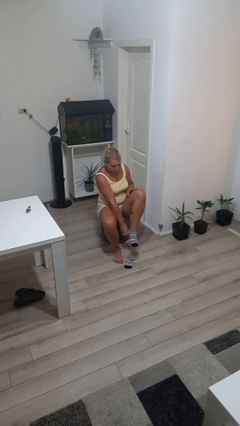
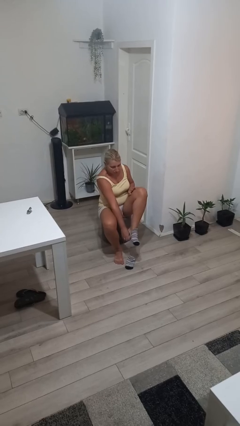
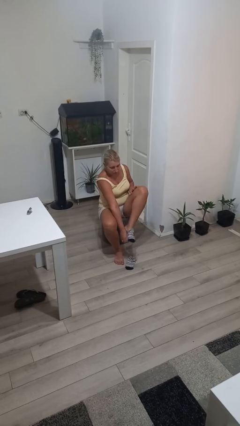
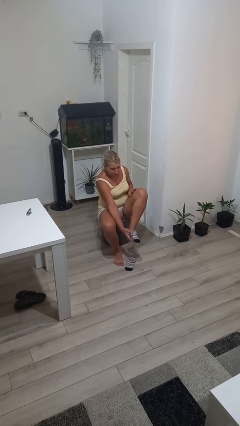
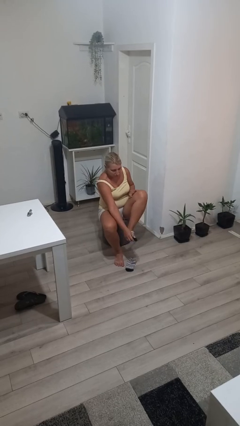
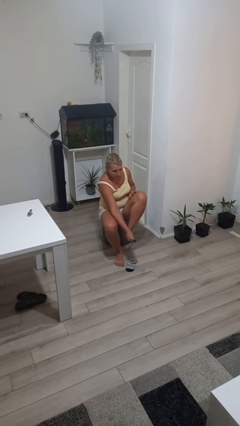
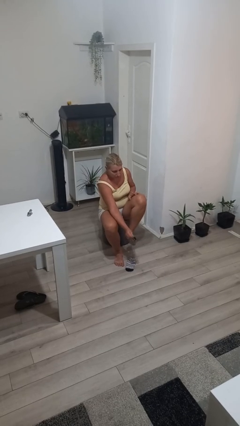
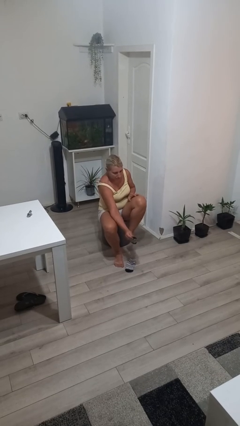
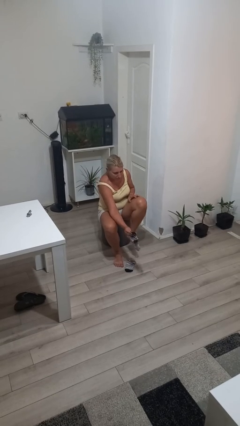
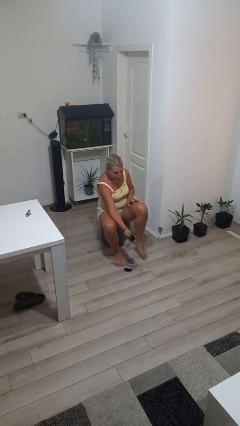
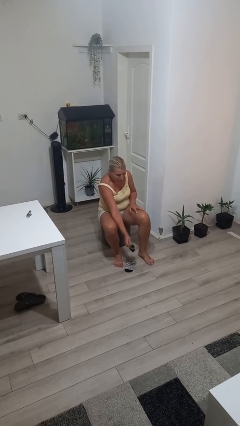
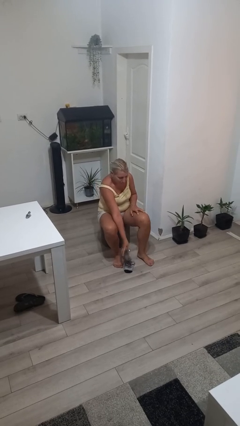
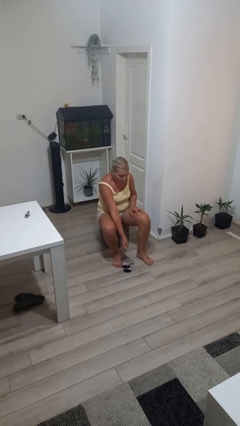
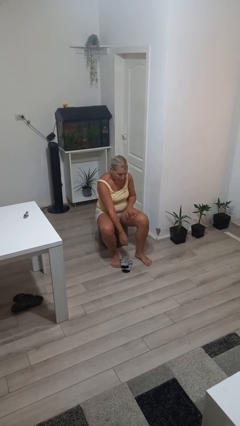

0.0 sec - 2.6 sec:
person takes off socks

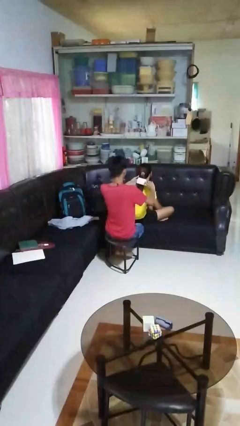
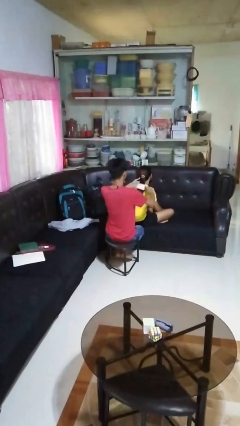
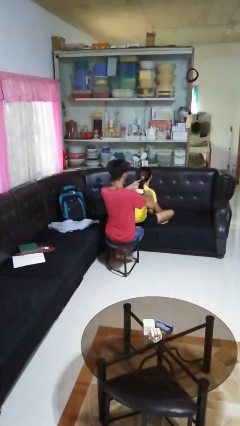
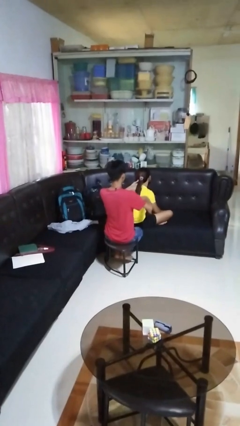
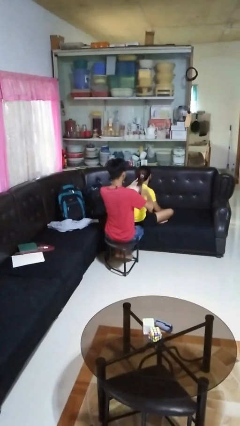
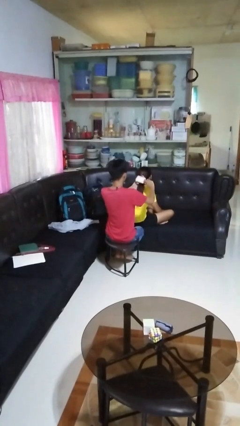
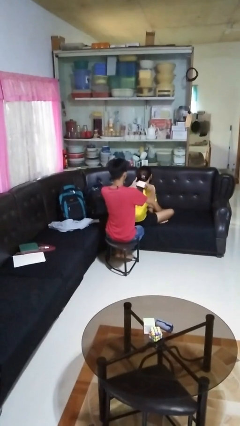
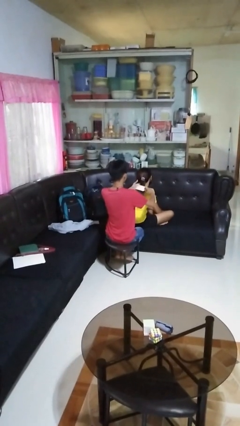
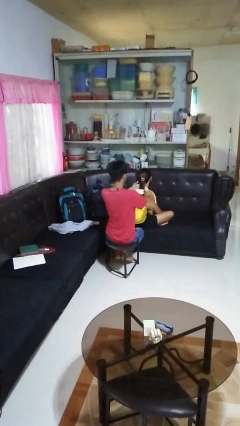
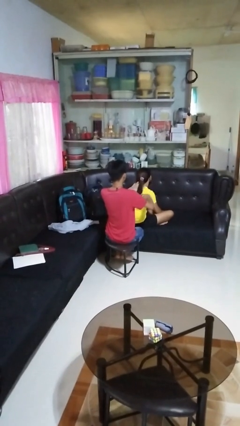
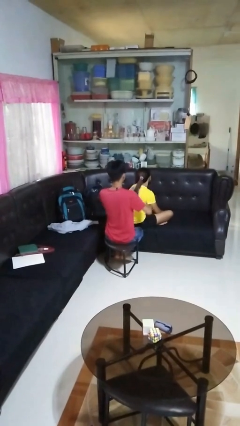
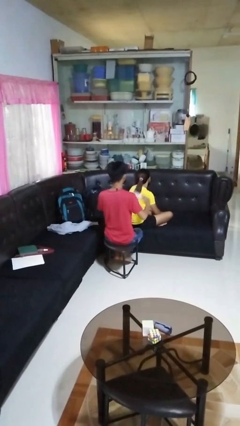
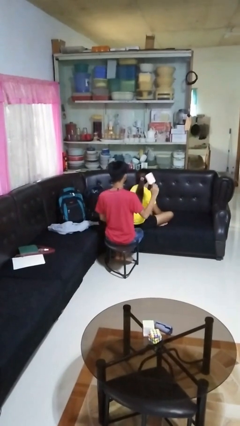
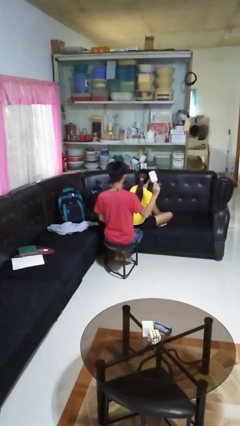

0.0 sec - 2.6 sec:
person brushes hair of person

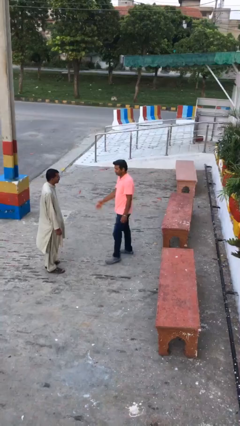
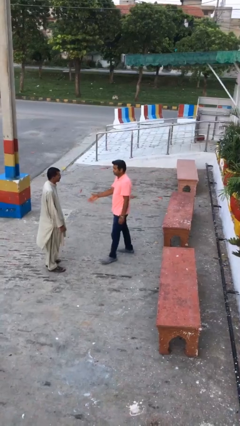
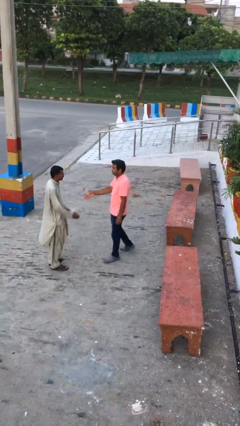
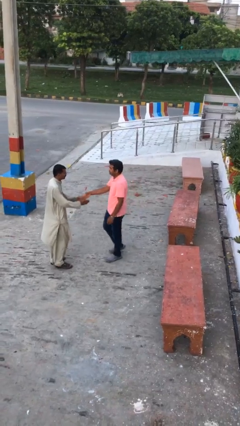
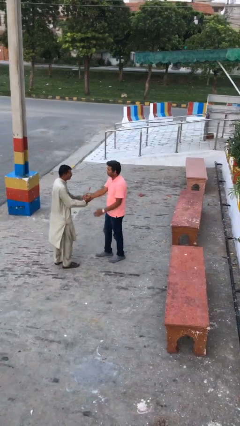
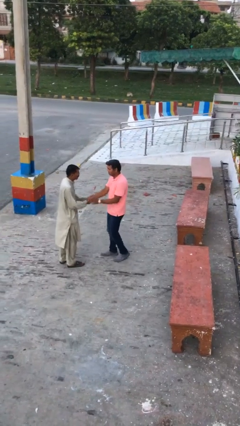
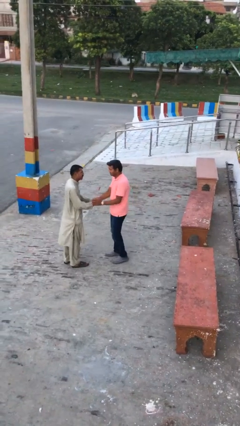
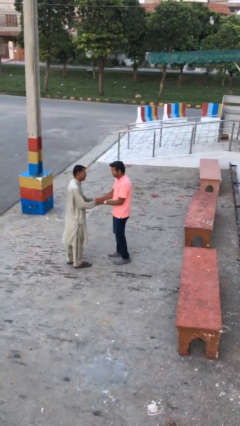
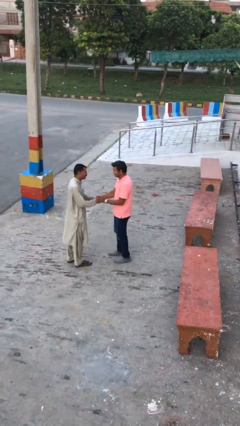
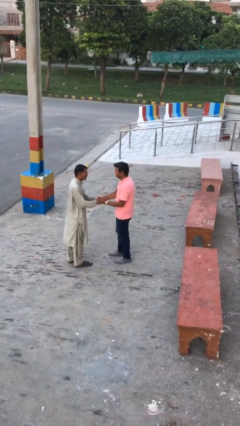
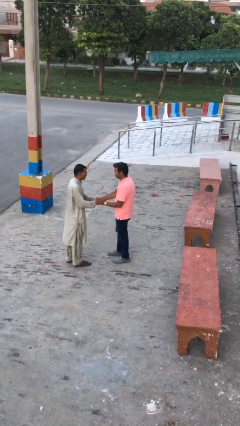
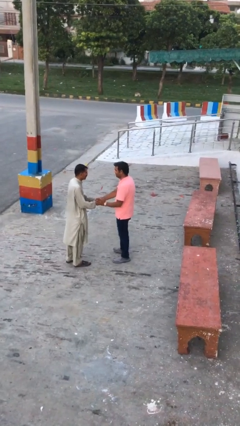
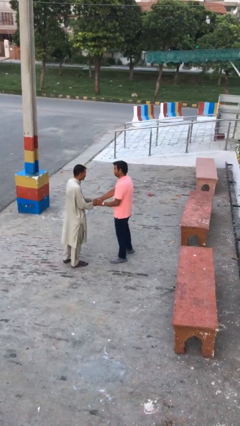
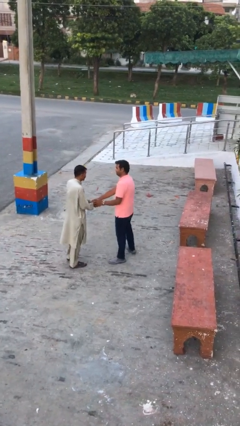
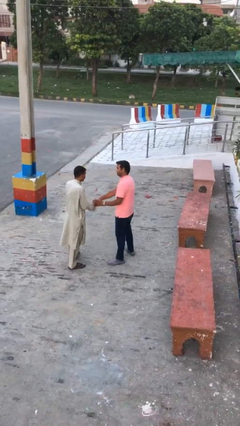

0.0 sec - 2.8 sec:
person shakes hand

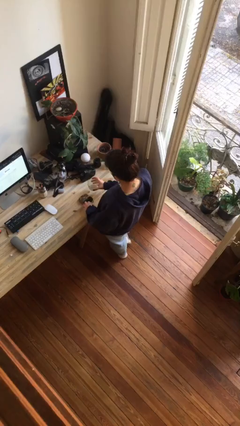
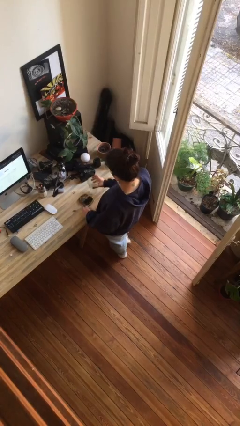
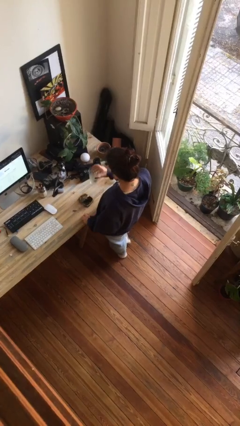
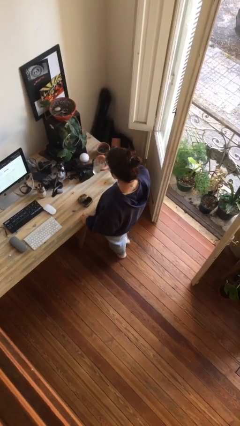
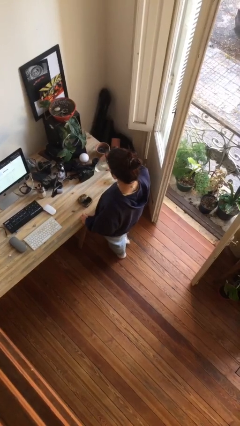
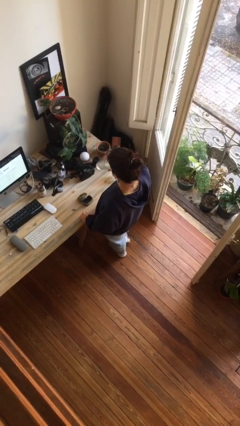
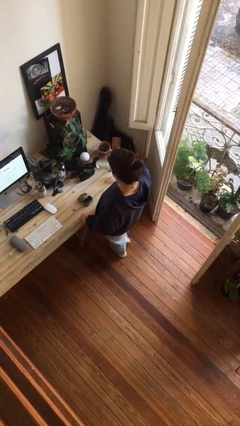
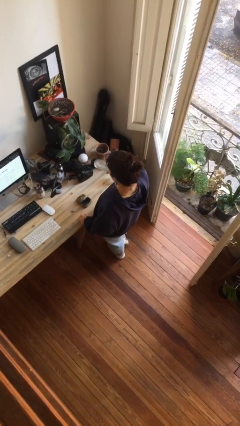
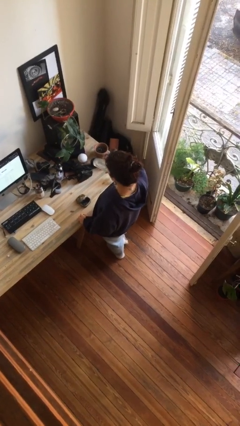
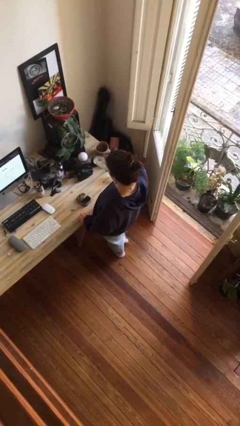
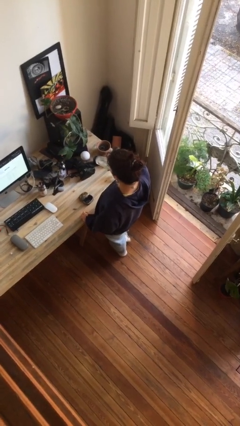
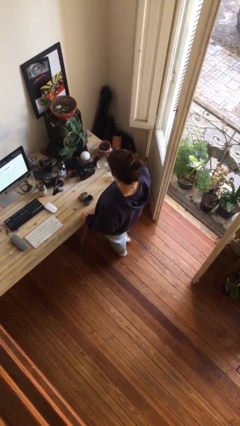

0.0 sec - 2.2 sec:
person drinks from cup

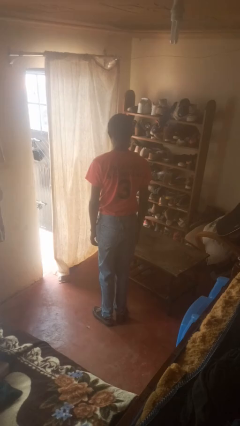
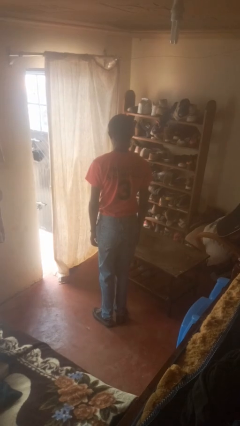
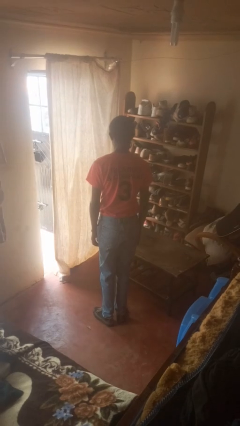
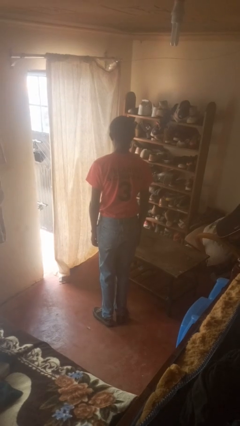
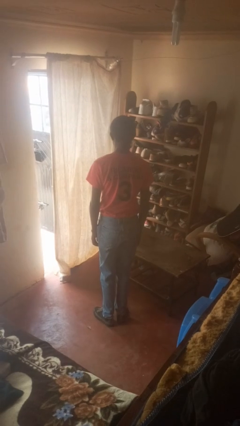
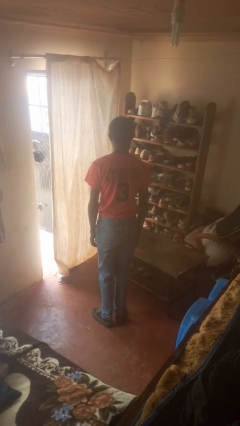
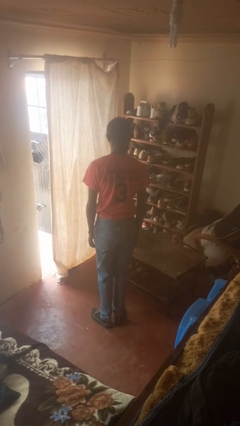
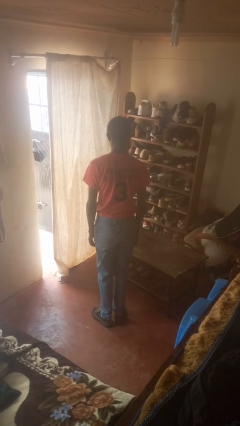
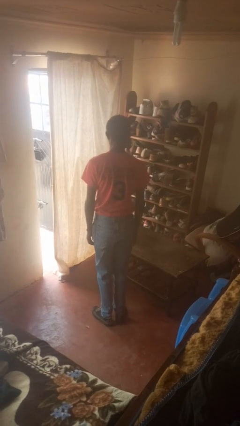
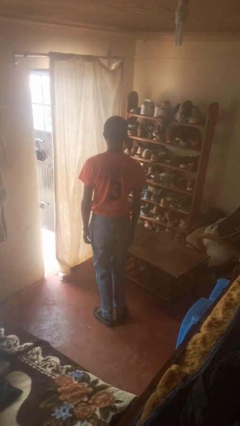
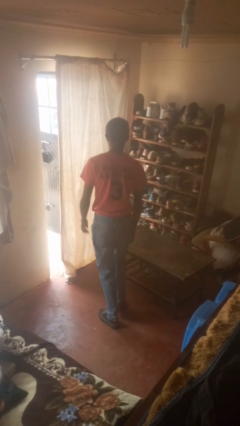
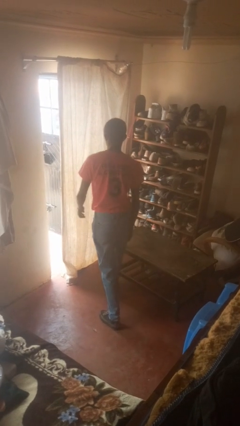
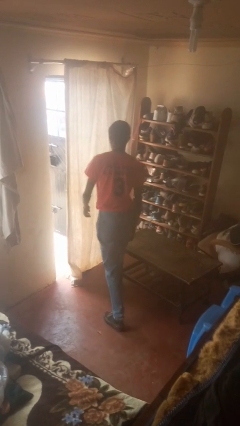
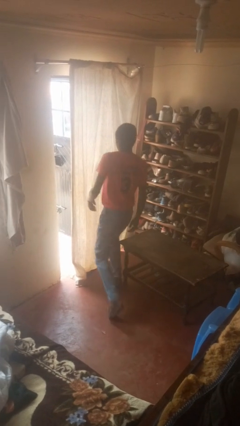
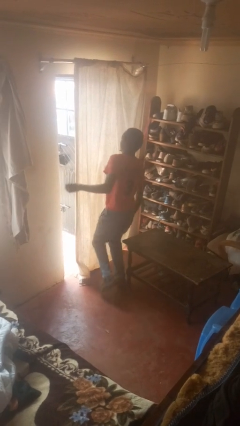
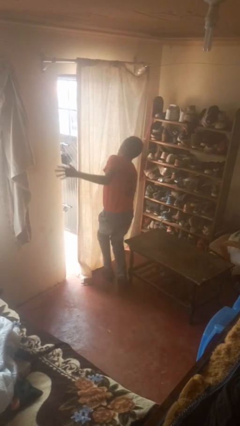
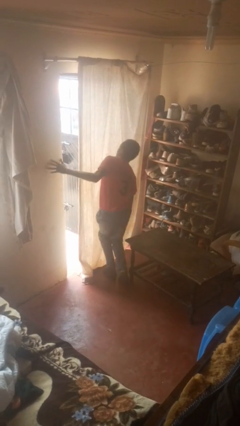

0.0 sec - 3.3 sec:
person bumps into table

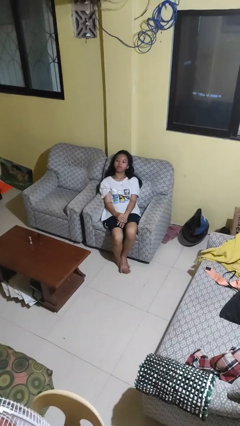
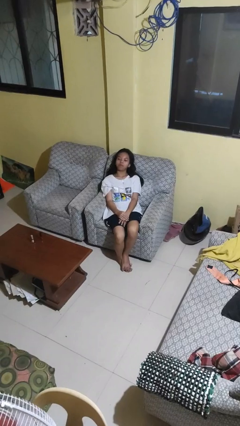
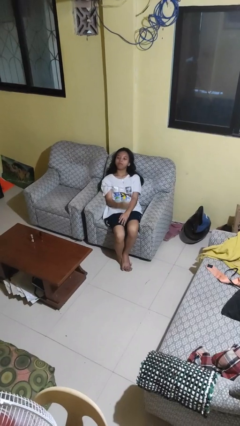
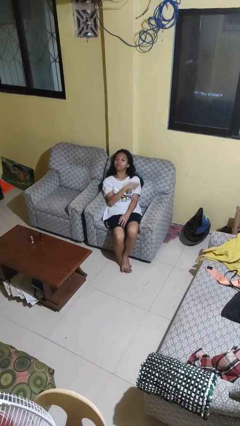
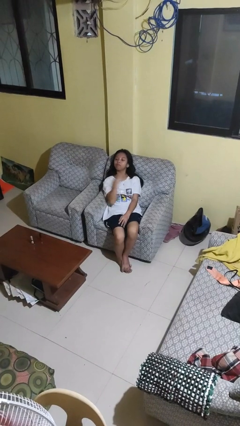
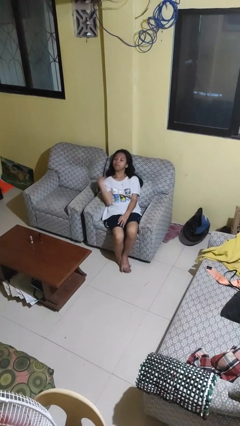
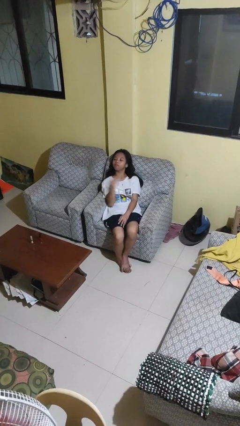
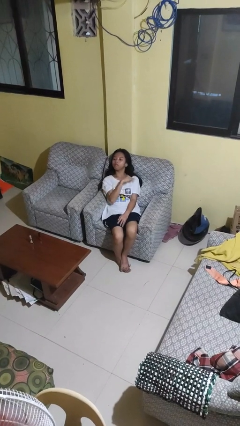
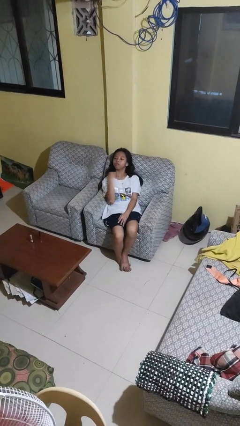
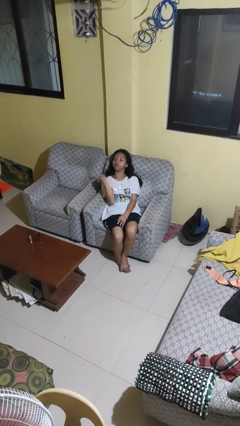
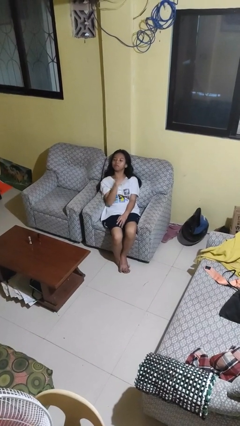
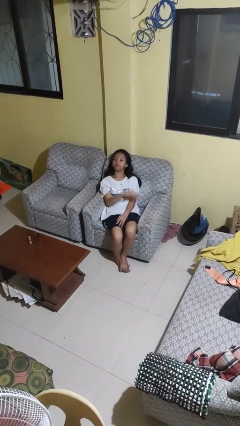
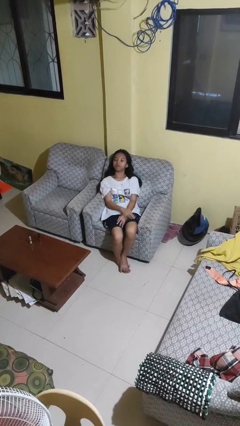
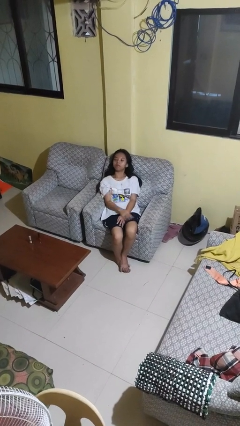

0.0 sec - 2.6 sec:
person gestures cut

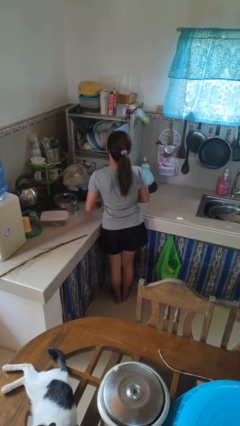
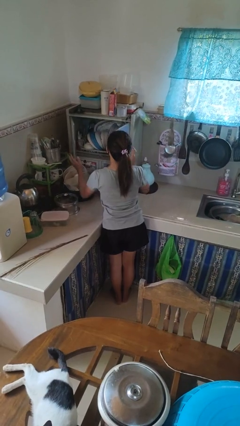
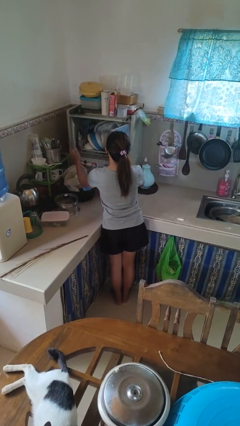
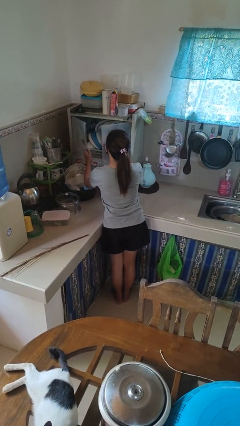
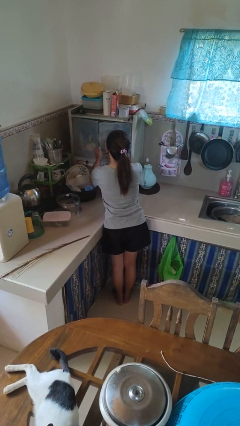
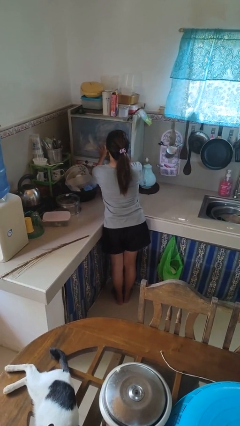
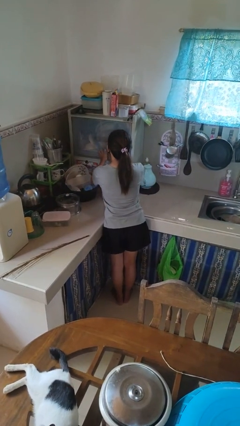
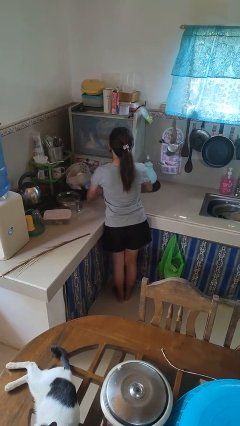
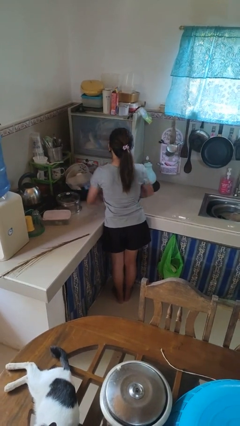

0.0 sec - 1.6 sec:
person closes kitchen drawer
